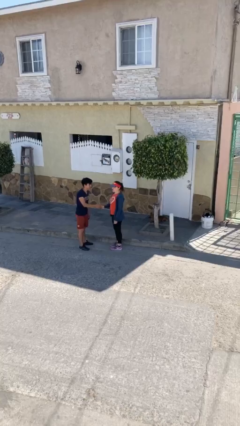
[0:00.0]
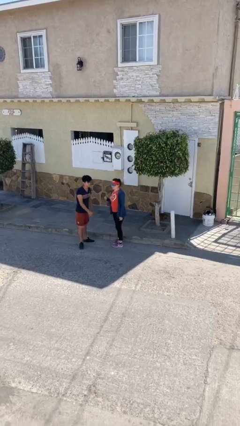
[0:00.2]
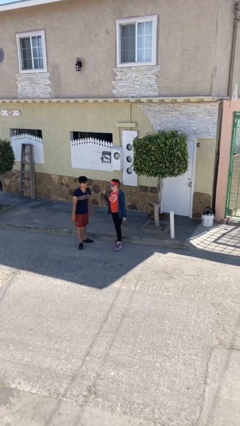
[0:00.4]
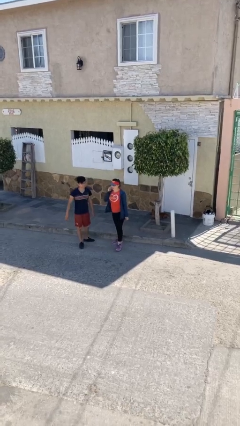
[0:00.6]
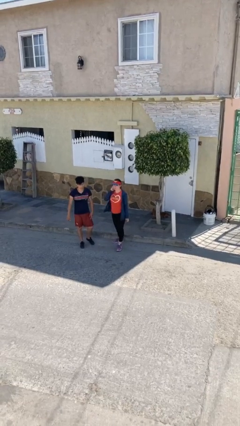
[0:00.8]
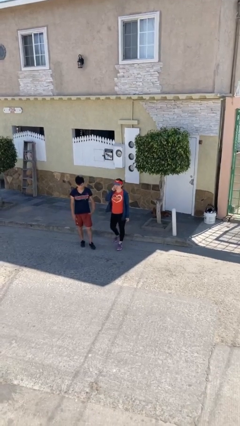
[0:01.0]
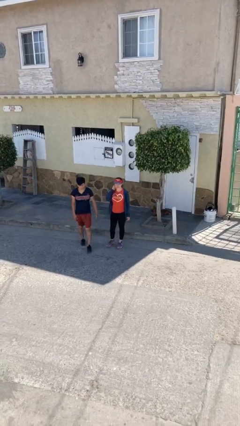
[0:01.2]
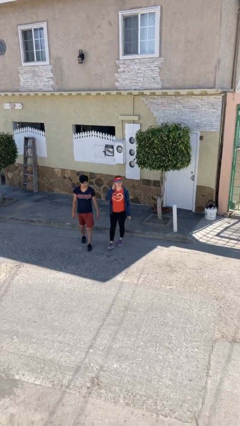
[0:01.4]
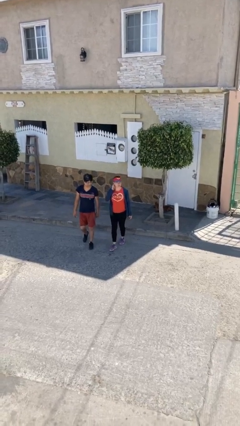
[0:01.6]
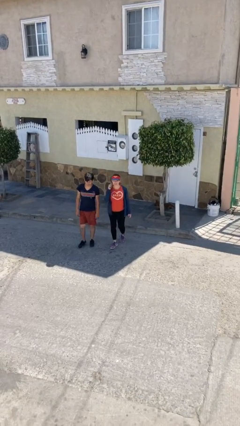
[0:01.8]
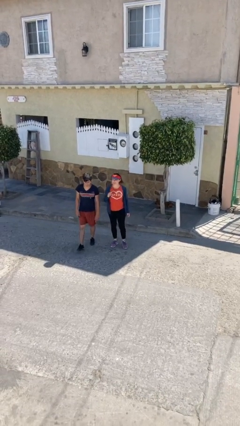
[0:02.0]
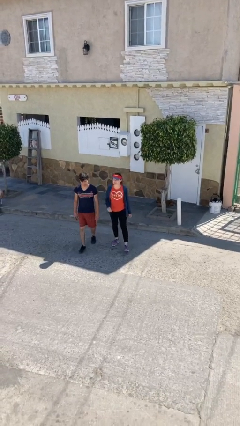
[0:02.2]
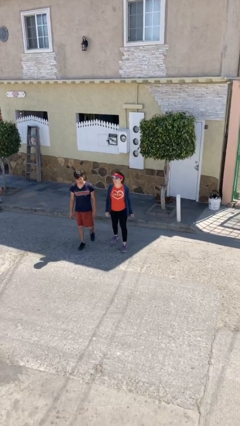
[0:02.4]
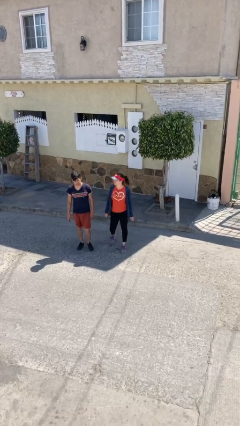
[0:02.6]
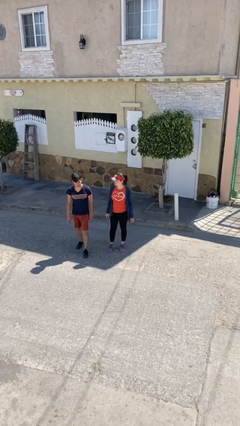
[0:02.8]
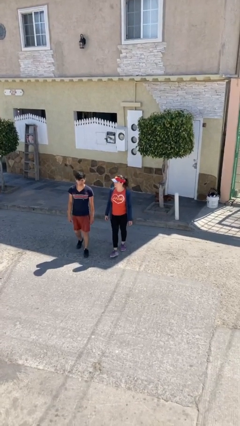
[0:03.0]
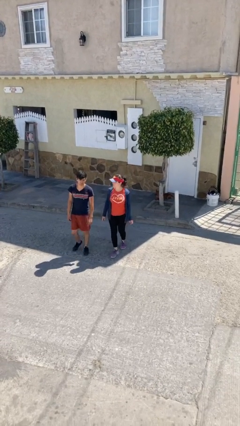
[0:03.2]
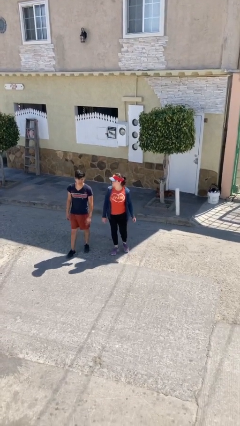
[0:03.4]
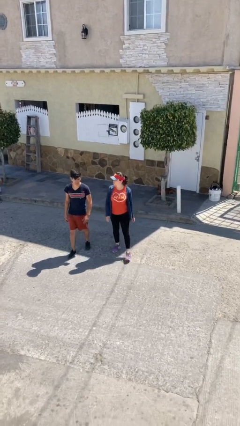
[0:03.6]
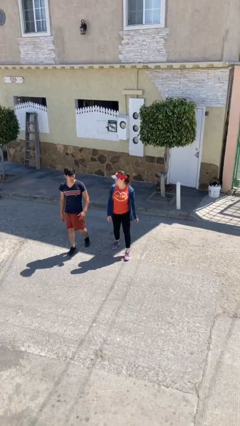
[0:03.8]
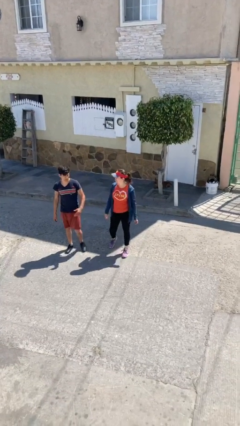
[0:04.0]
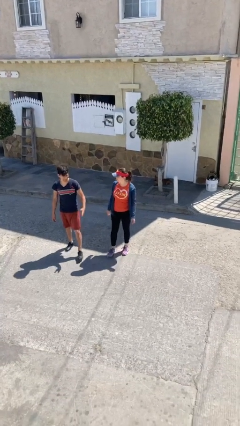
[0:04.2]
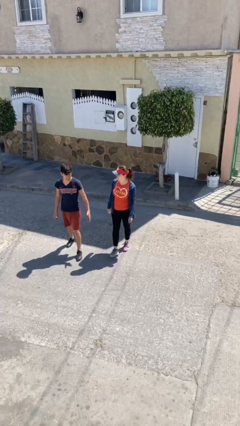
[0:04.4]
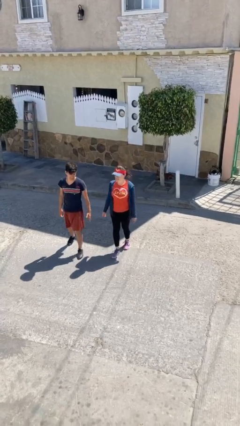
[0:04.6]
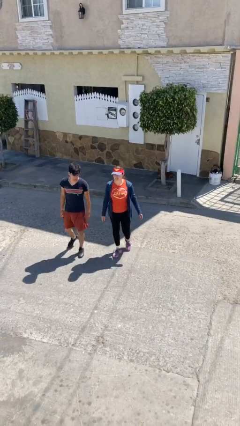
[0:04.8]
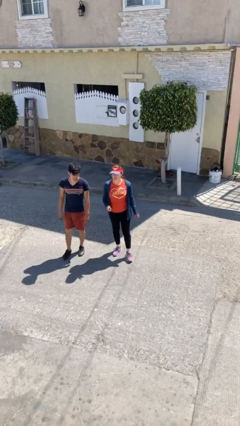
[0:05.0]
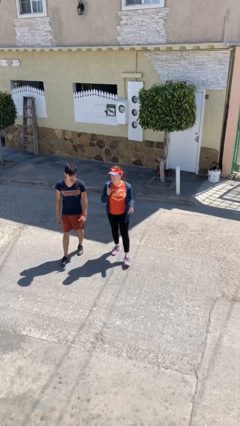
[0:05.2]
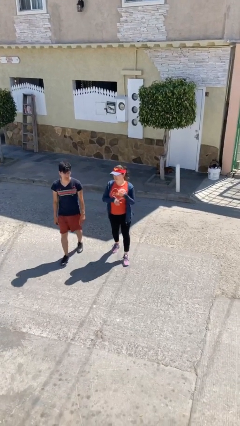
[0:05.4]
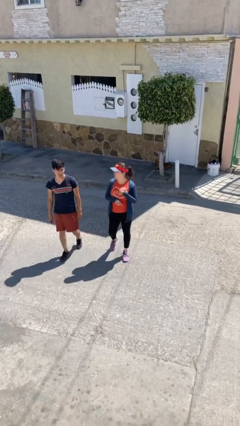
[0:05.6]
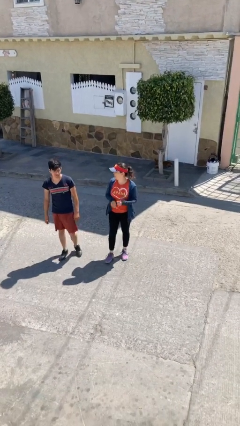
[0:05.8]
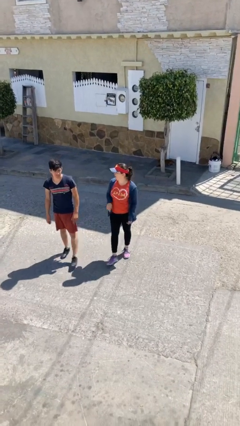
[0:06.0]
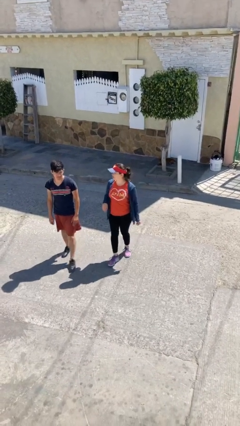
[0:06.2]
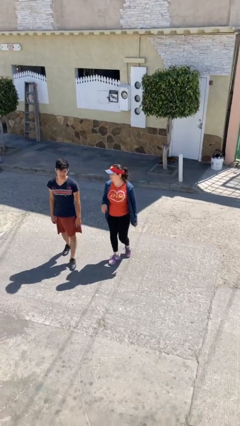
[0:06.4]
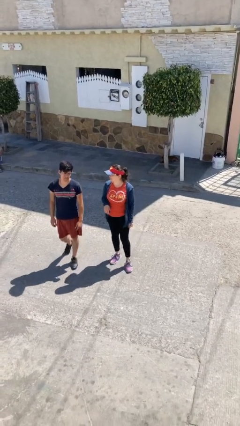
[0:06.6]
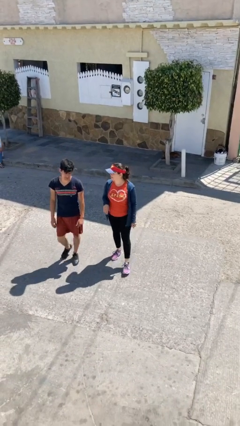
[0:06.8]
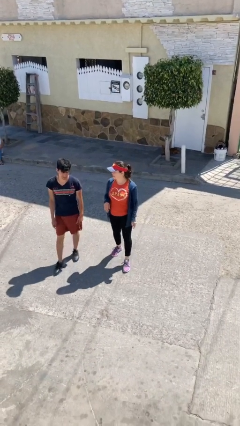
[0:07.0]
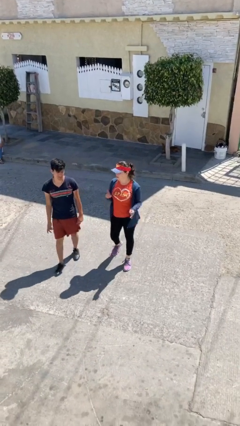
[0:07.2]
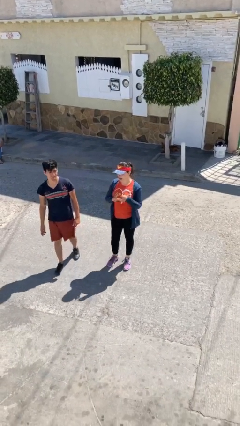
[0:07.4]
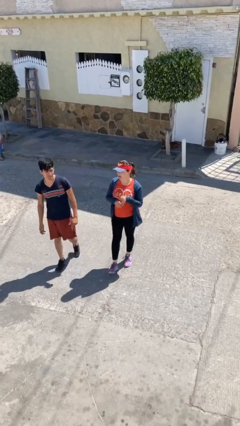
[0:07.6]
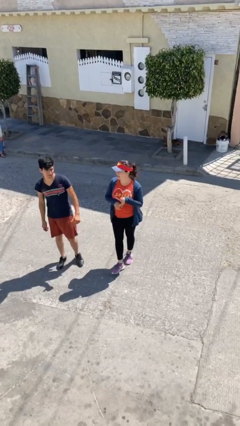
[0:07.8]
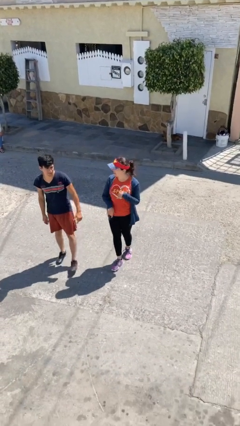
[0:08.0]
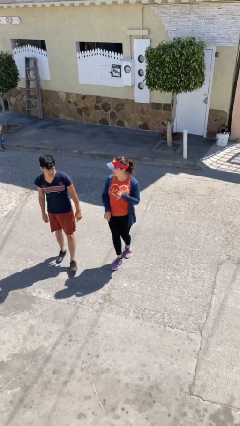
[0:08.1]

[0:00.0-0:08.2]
person talks to person

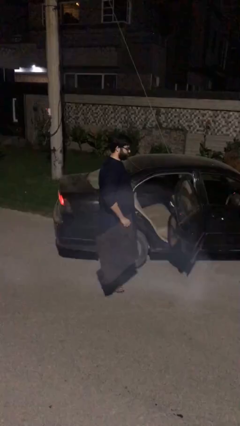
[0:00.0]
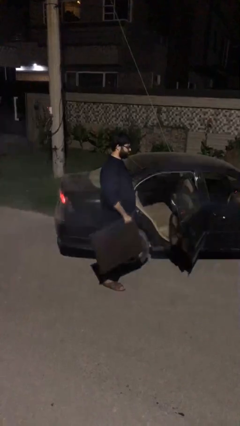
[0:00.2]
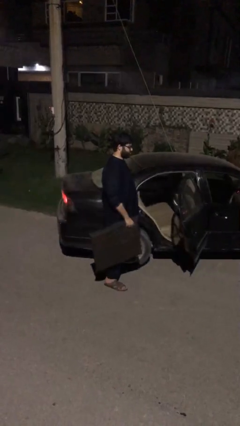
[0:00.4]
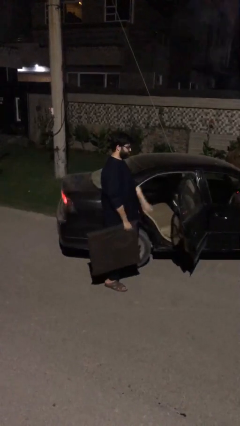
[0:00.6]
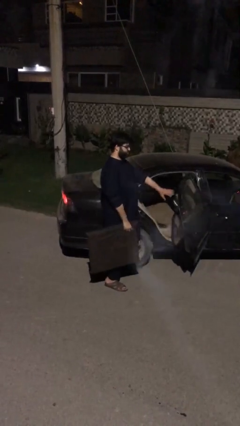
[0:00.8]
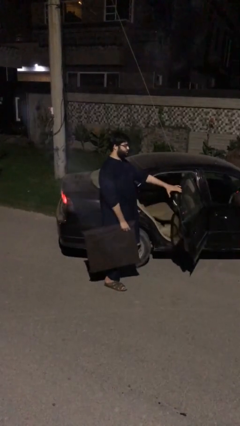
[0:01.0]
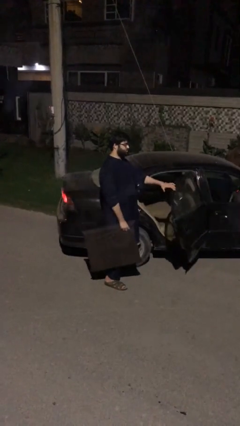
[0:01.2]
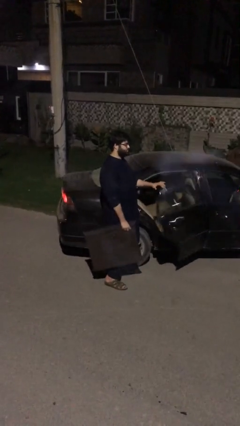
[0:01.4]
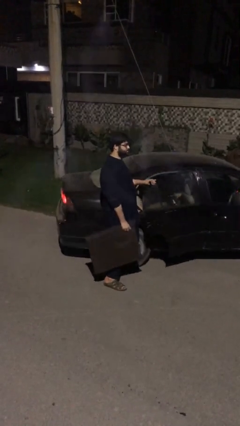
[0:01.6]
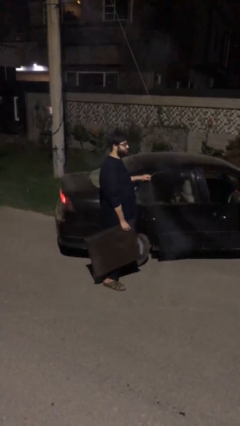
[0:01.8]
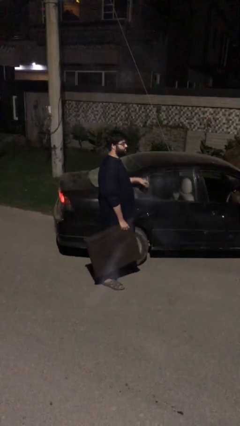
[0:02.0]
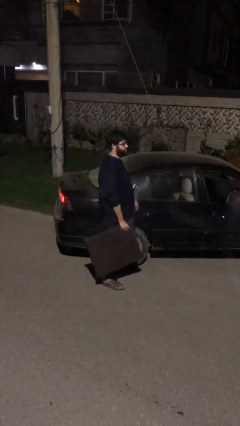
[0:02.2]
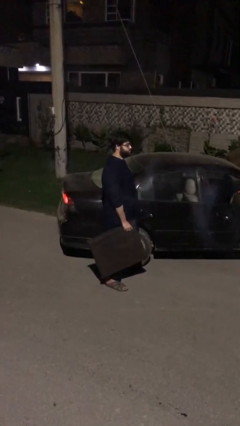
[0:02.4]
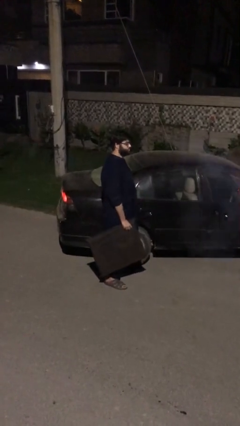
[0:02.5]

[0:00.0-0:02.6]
person closes car door

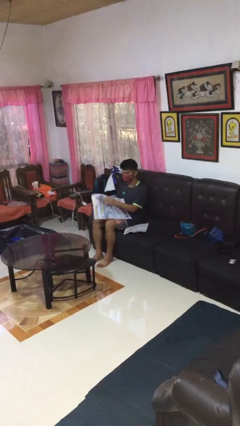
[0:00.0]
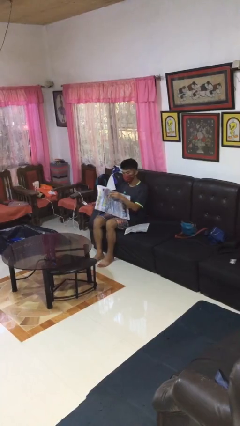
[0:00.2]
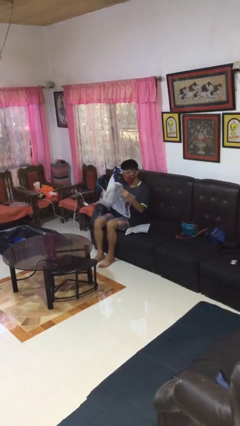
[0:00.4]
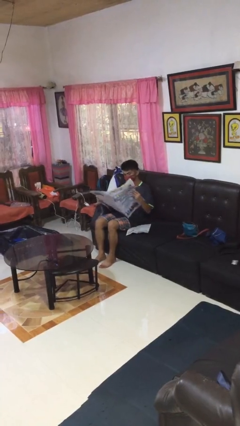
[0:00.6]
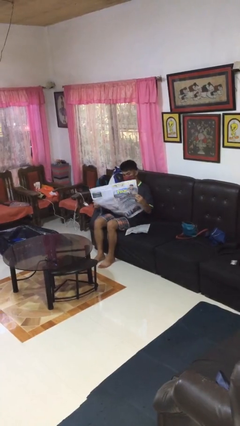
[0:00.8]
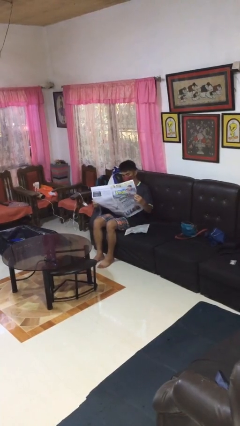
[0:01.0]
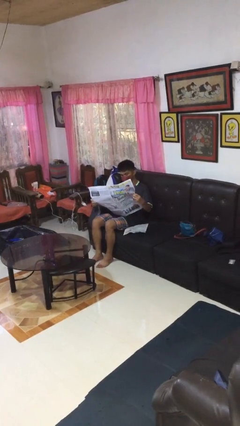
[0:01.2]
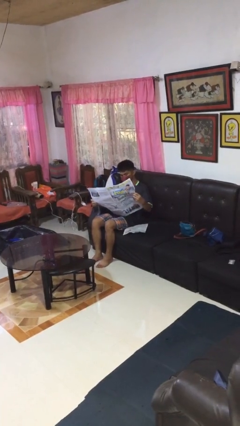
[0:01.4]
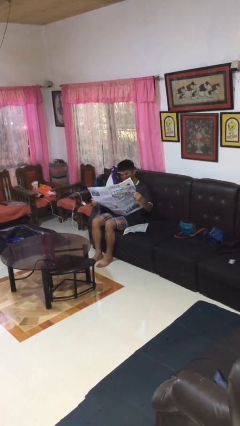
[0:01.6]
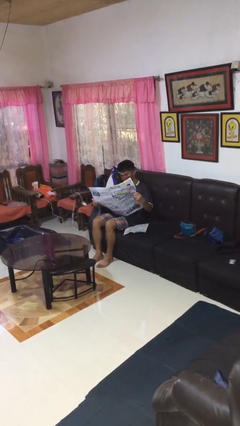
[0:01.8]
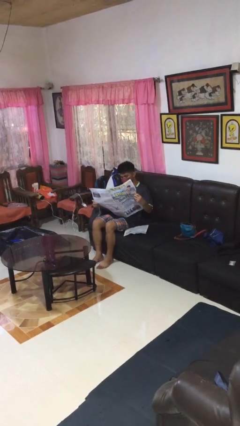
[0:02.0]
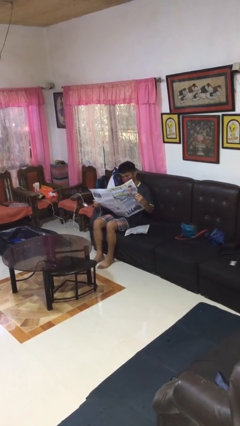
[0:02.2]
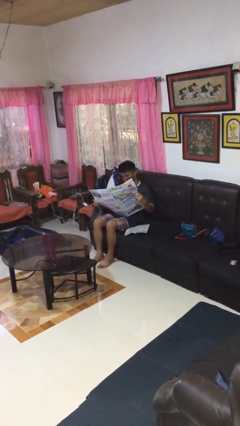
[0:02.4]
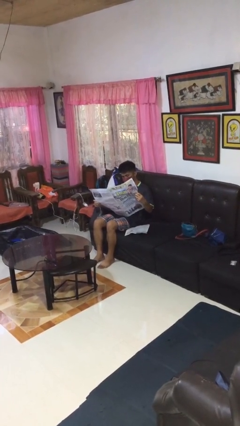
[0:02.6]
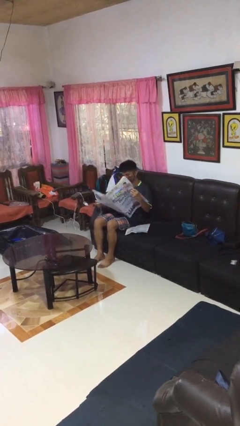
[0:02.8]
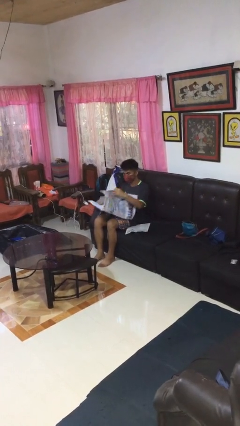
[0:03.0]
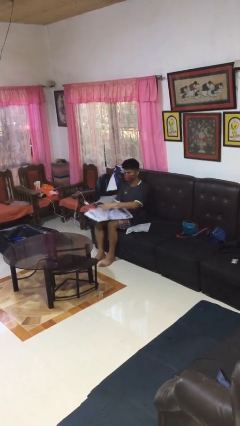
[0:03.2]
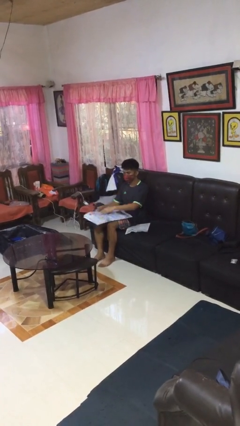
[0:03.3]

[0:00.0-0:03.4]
person reads newspaper

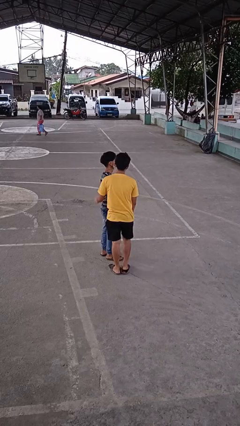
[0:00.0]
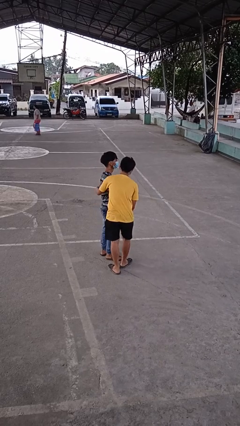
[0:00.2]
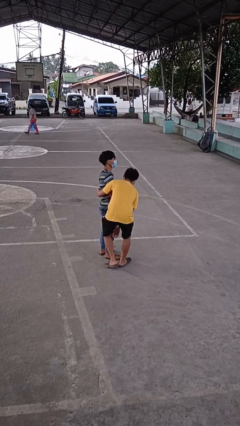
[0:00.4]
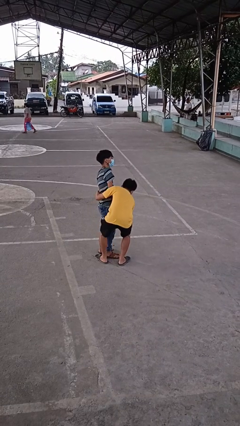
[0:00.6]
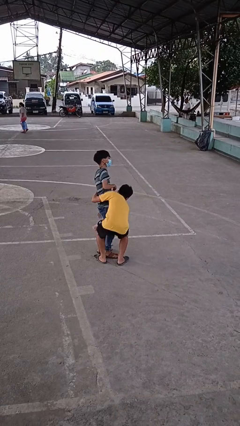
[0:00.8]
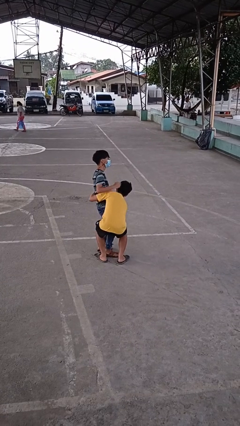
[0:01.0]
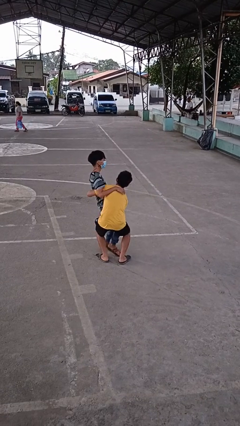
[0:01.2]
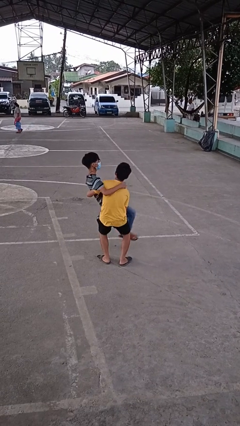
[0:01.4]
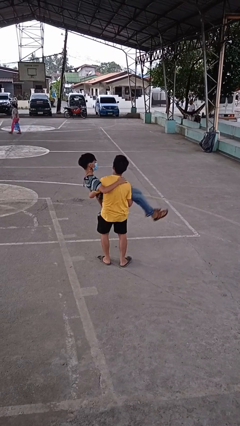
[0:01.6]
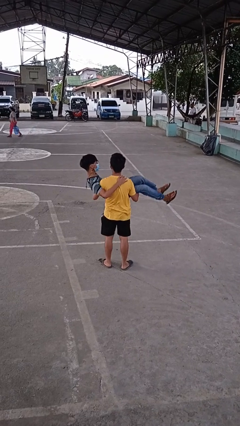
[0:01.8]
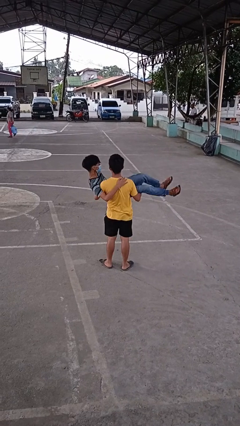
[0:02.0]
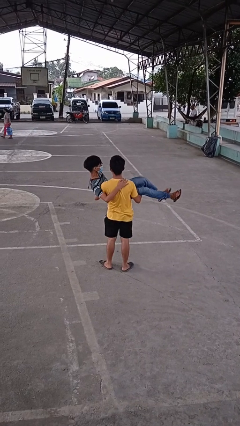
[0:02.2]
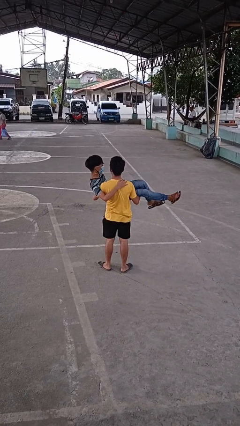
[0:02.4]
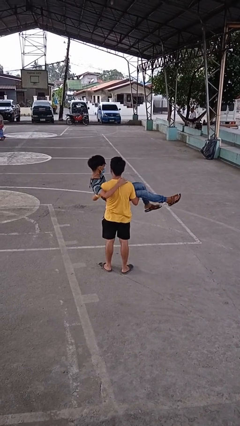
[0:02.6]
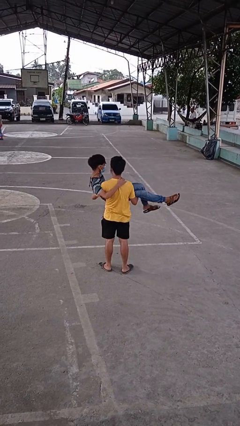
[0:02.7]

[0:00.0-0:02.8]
person picks up person

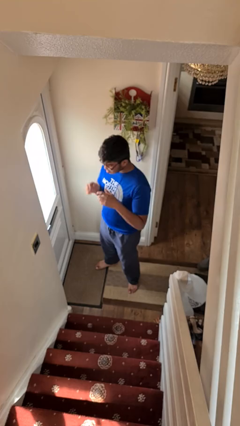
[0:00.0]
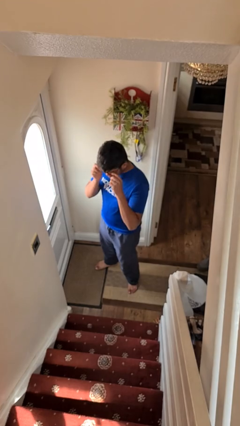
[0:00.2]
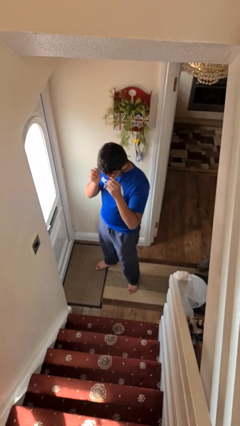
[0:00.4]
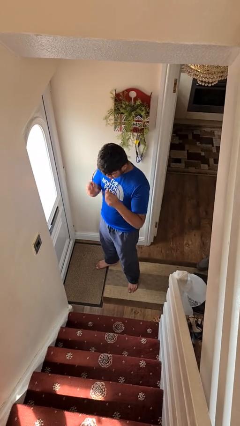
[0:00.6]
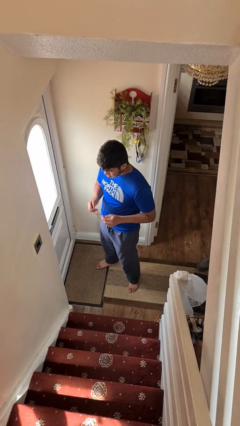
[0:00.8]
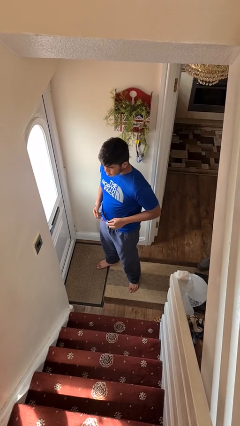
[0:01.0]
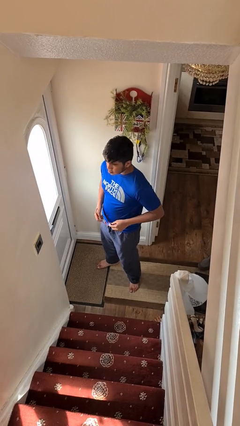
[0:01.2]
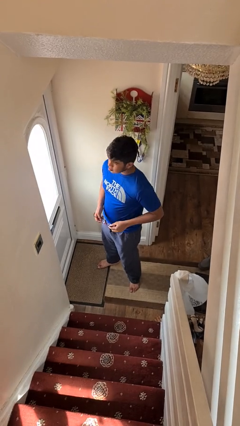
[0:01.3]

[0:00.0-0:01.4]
person takes off glasses
